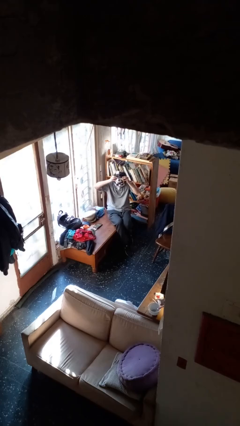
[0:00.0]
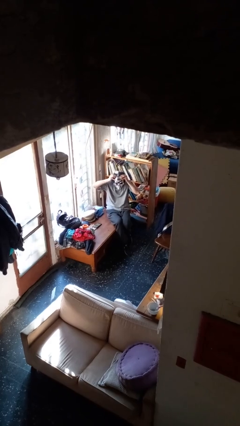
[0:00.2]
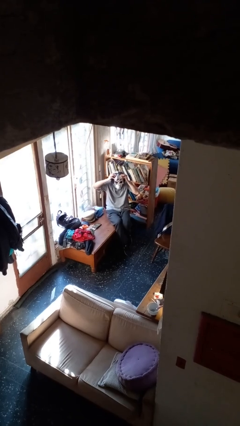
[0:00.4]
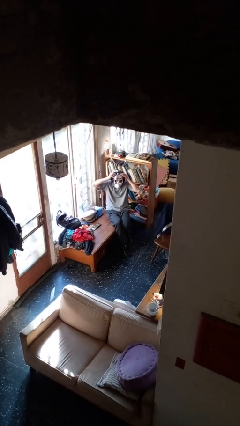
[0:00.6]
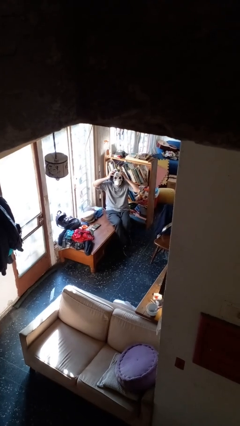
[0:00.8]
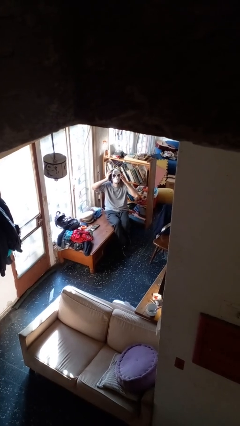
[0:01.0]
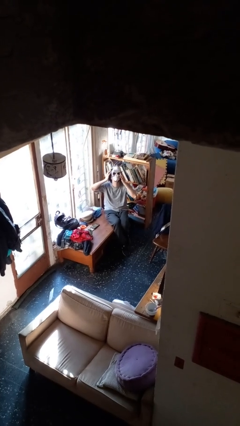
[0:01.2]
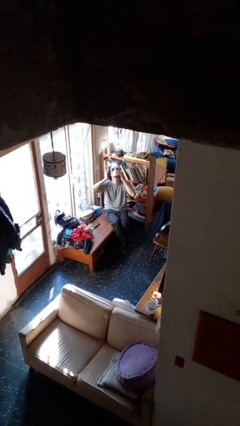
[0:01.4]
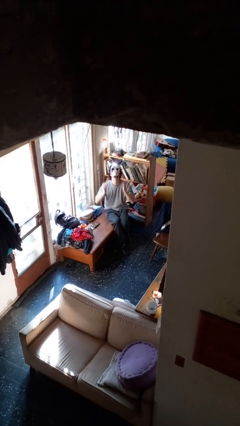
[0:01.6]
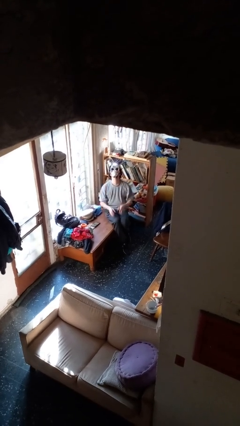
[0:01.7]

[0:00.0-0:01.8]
person puts on facemask

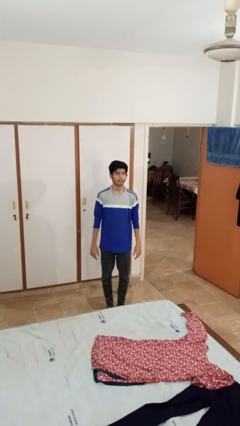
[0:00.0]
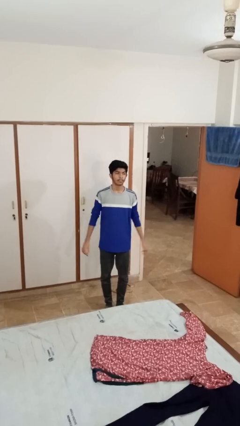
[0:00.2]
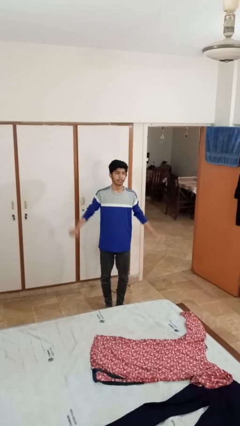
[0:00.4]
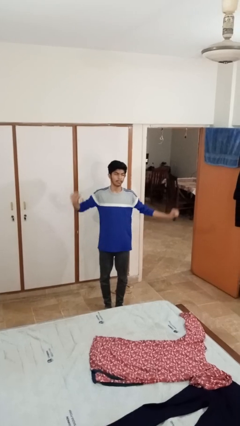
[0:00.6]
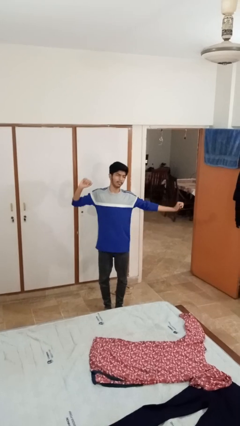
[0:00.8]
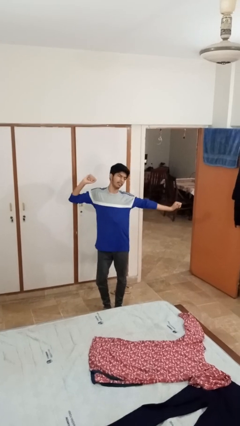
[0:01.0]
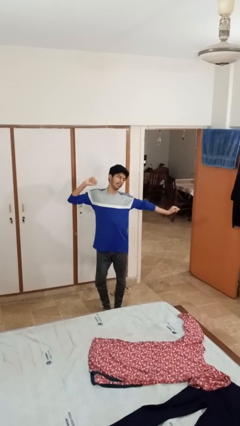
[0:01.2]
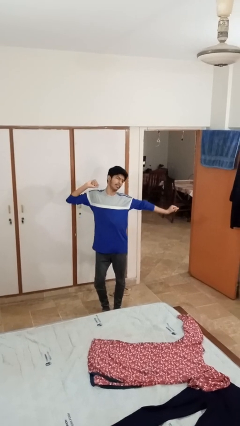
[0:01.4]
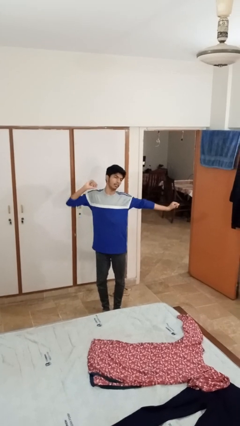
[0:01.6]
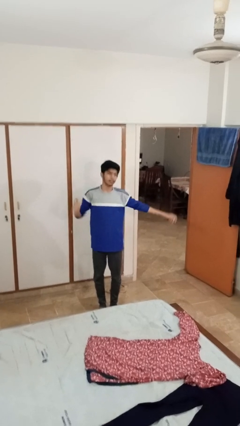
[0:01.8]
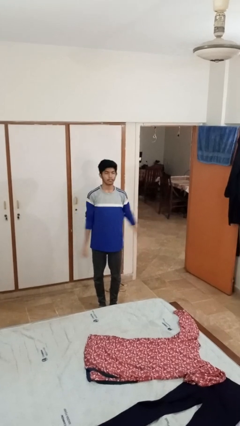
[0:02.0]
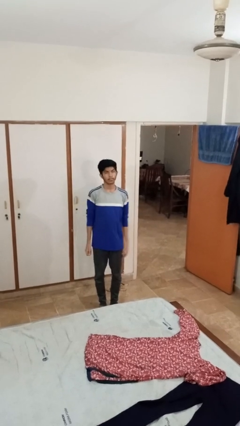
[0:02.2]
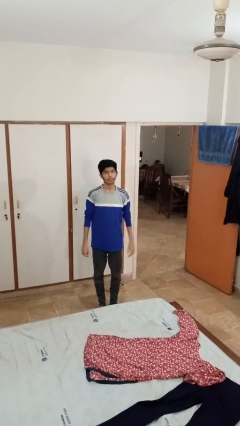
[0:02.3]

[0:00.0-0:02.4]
person stretches arms to side

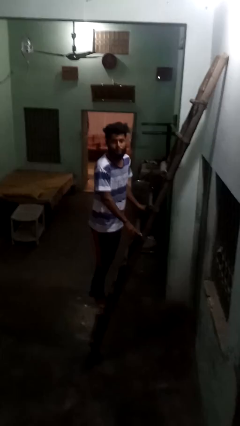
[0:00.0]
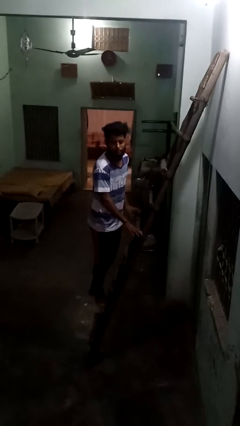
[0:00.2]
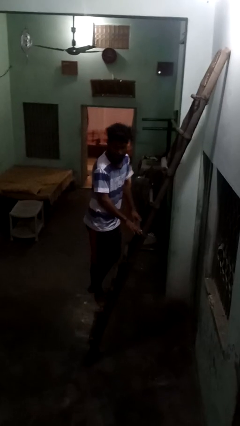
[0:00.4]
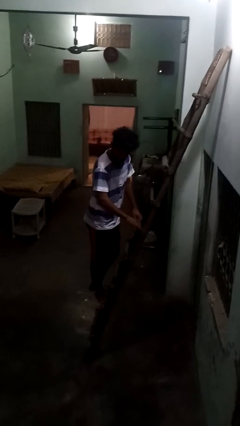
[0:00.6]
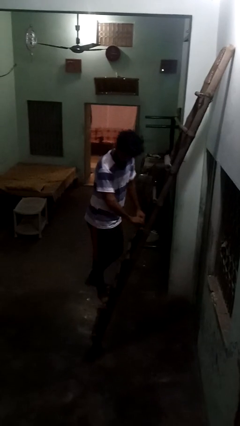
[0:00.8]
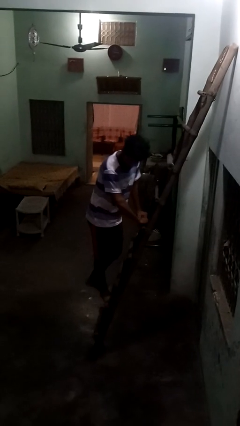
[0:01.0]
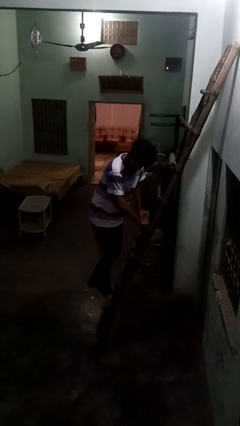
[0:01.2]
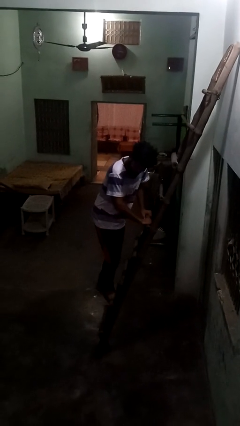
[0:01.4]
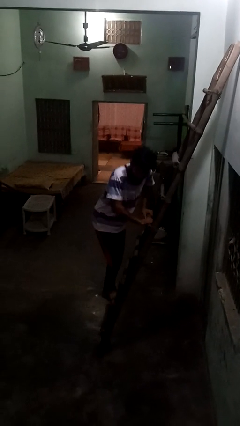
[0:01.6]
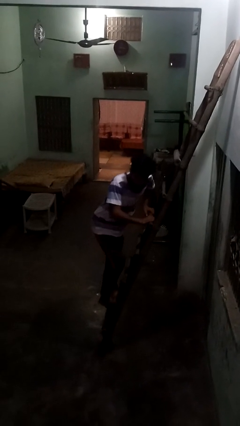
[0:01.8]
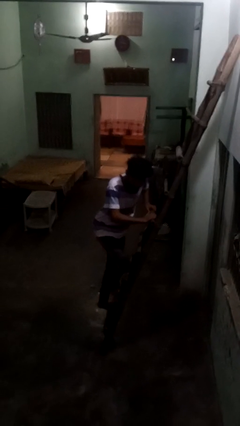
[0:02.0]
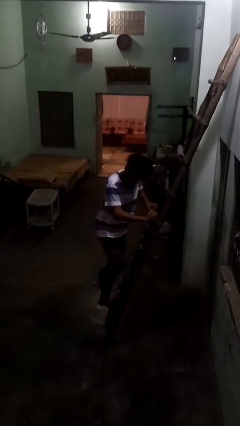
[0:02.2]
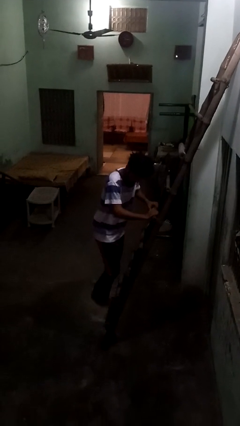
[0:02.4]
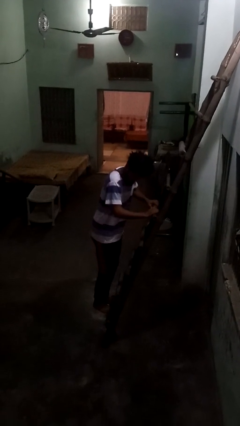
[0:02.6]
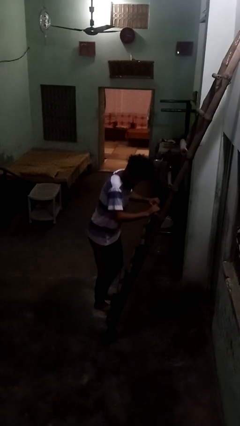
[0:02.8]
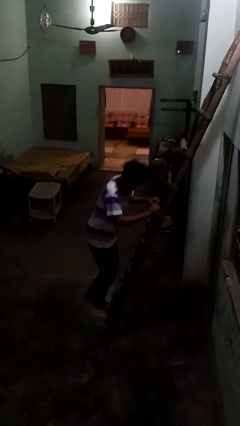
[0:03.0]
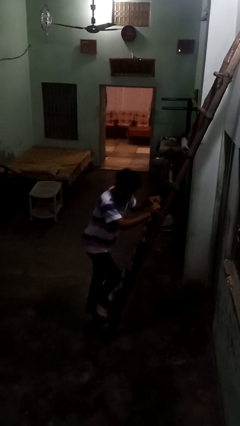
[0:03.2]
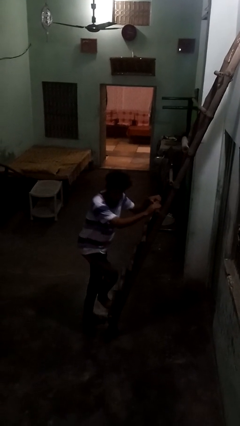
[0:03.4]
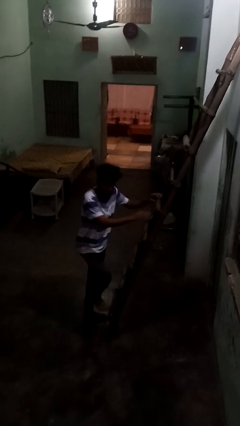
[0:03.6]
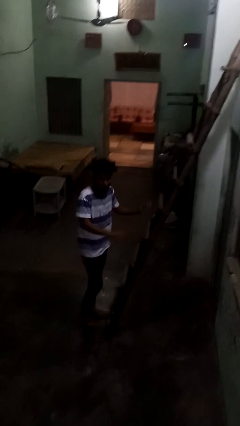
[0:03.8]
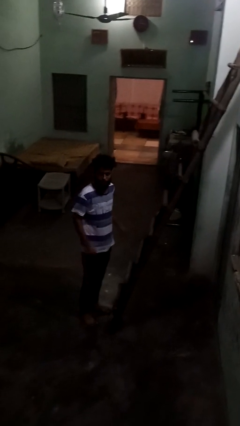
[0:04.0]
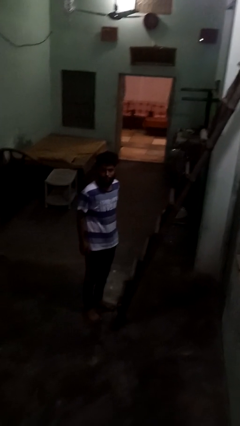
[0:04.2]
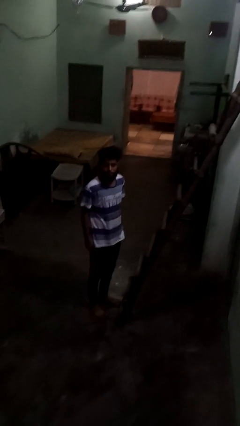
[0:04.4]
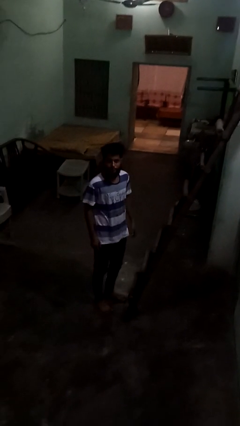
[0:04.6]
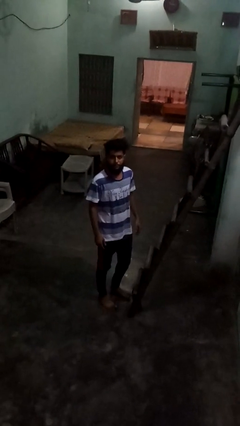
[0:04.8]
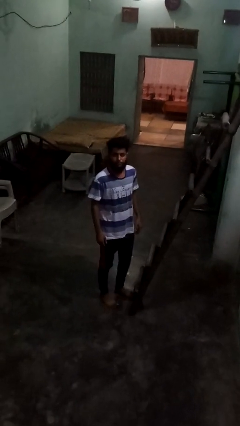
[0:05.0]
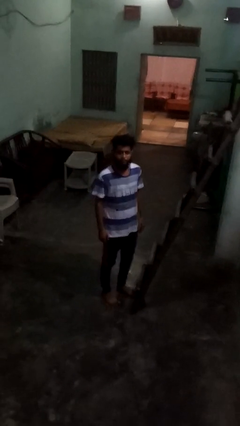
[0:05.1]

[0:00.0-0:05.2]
person climbs down ladder

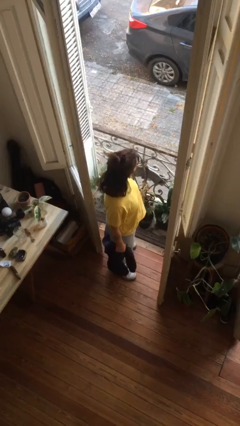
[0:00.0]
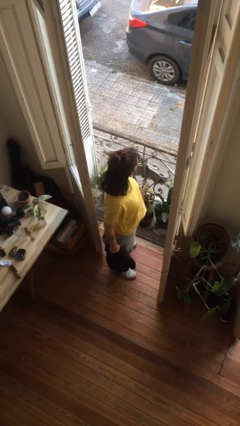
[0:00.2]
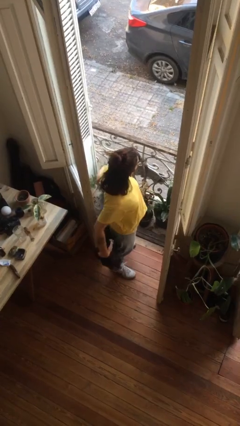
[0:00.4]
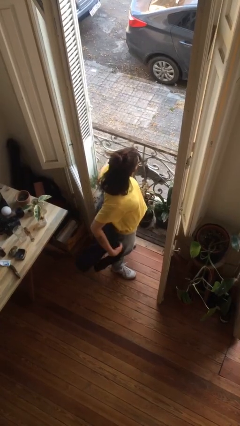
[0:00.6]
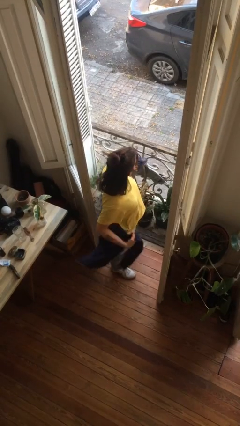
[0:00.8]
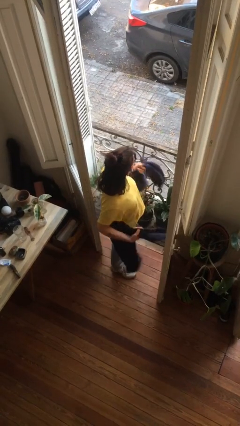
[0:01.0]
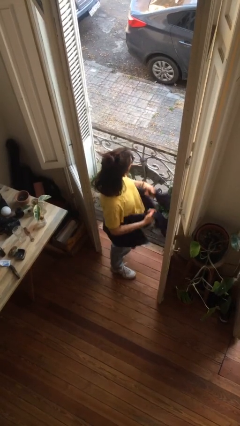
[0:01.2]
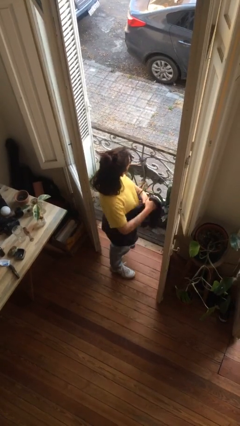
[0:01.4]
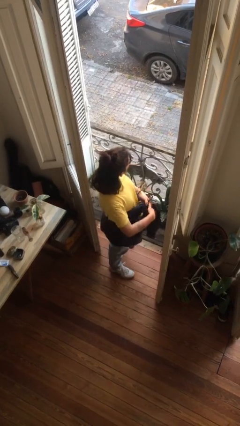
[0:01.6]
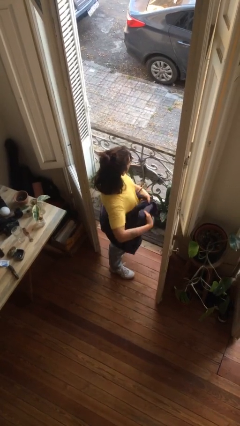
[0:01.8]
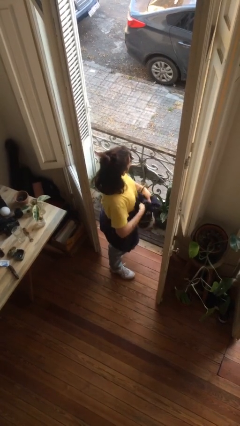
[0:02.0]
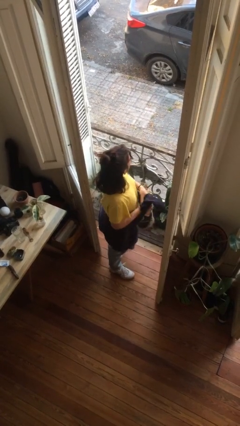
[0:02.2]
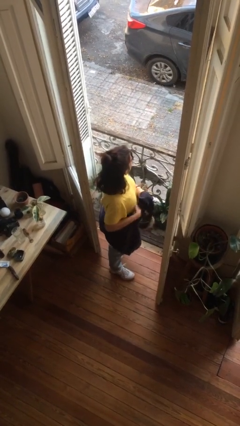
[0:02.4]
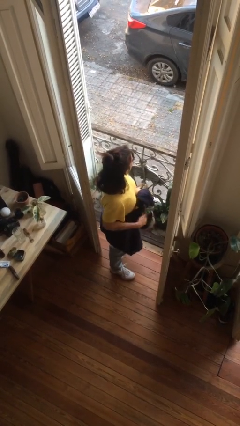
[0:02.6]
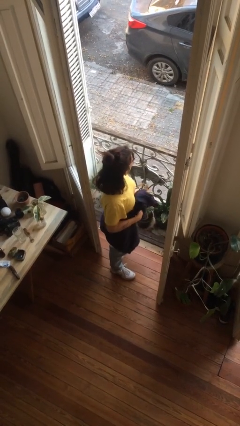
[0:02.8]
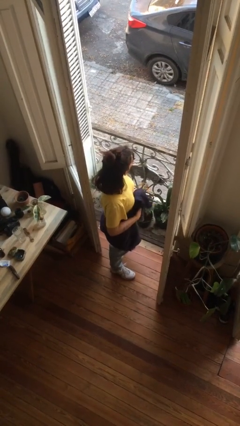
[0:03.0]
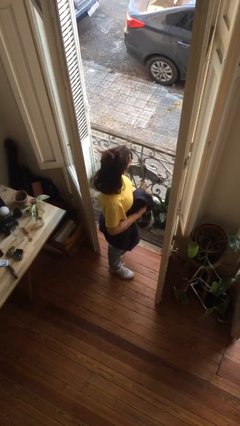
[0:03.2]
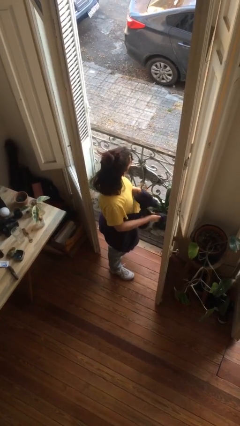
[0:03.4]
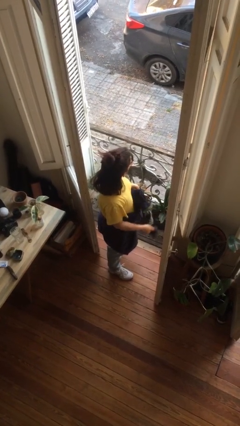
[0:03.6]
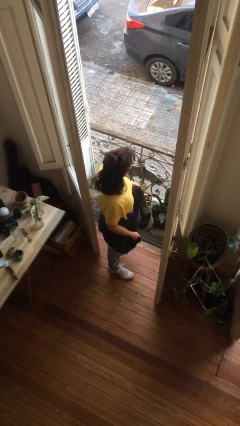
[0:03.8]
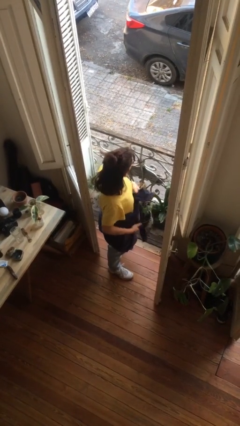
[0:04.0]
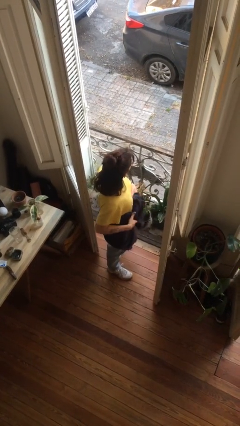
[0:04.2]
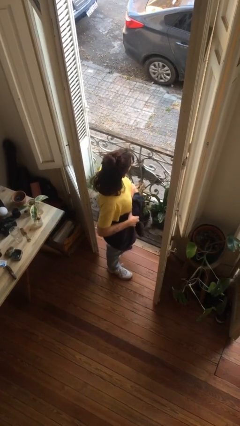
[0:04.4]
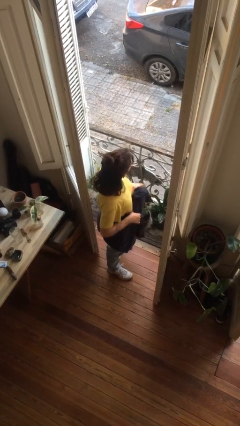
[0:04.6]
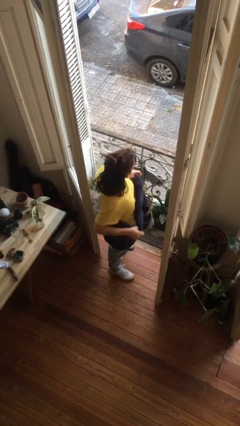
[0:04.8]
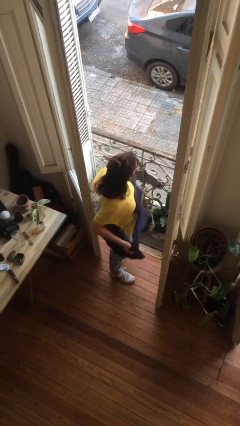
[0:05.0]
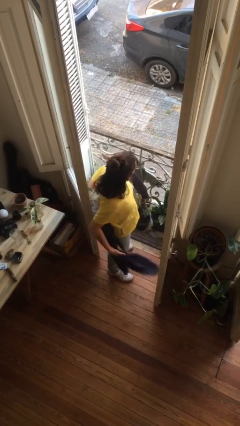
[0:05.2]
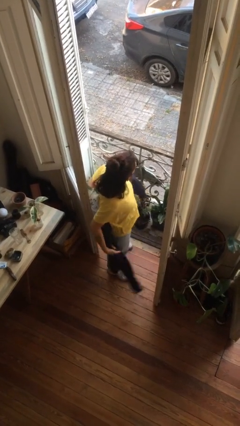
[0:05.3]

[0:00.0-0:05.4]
person ties jacket around waist

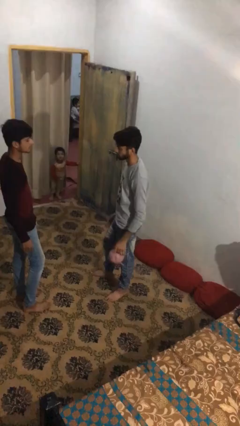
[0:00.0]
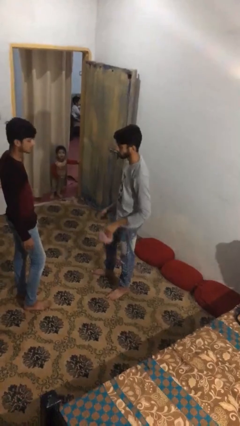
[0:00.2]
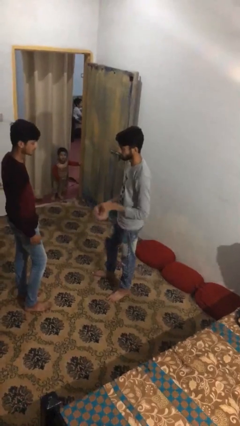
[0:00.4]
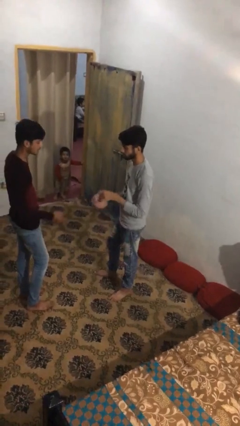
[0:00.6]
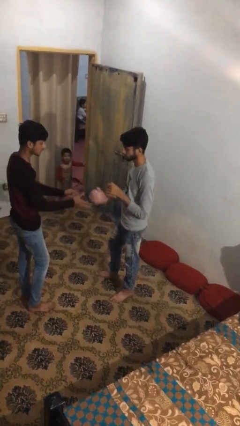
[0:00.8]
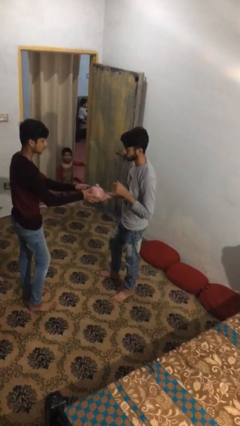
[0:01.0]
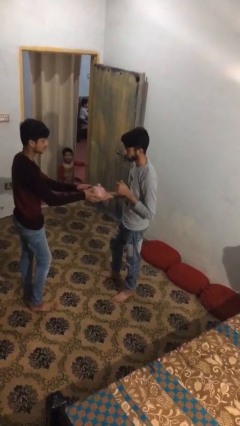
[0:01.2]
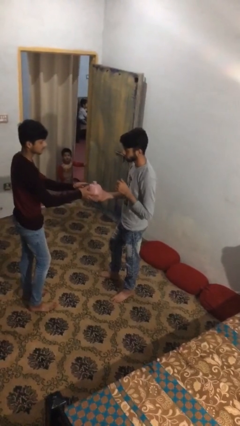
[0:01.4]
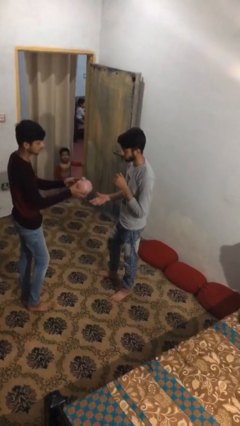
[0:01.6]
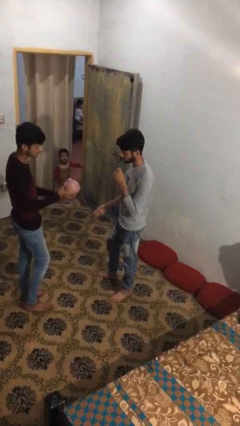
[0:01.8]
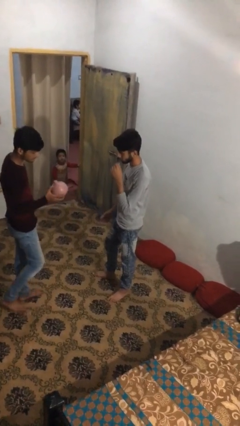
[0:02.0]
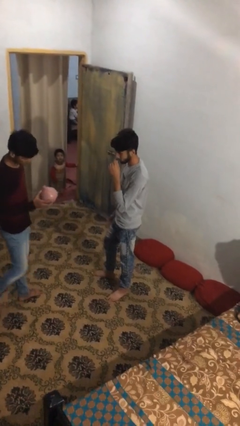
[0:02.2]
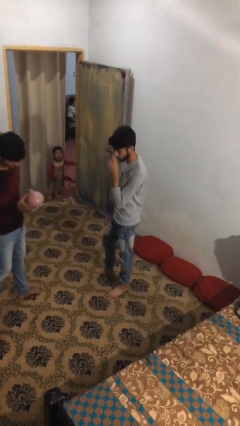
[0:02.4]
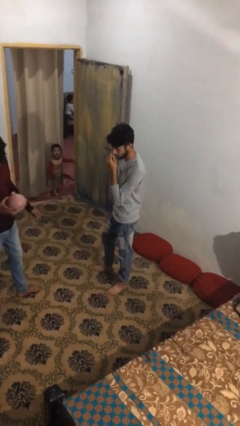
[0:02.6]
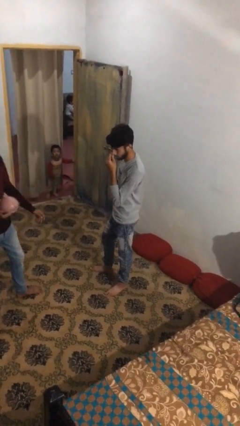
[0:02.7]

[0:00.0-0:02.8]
person transfers object to person
